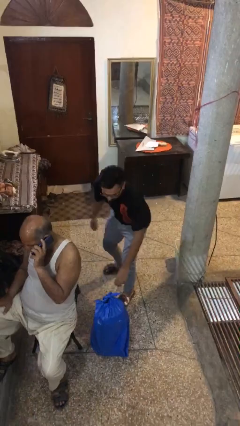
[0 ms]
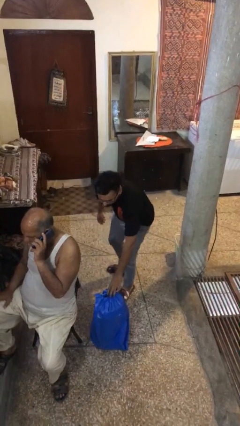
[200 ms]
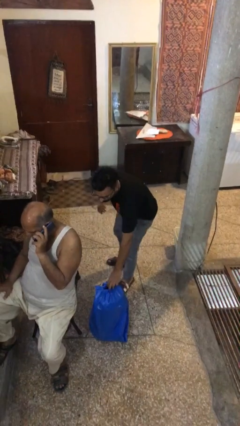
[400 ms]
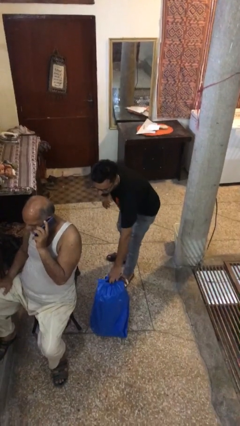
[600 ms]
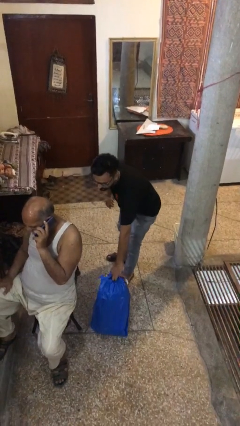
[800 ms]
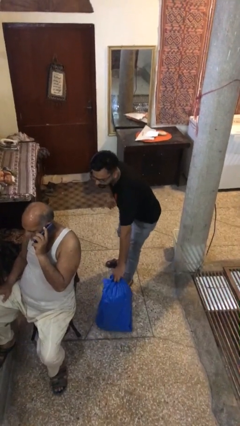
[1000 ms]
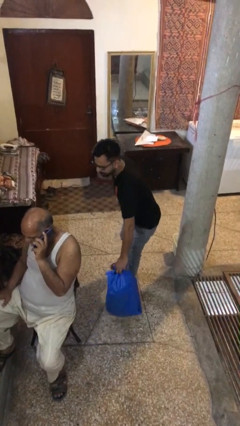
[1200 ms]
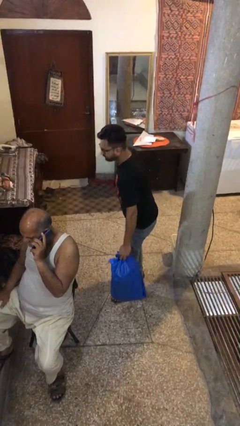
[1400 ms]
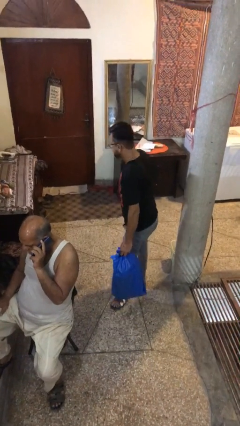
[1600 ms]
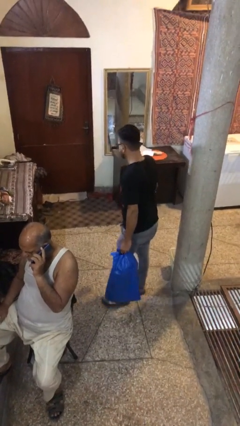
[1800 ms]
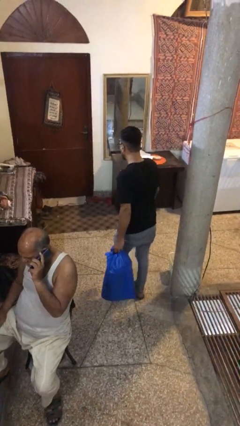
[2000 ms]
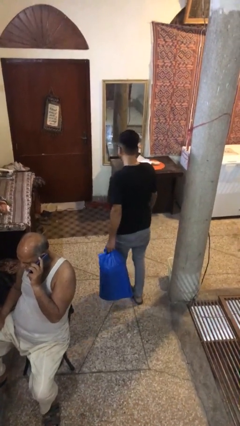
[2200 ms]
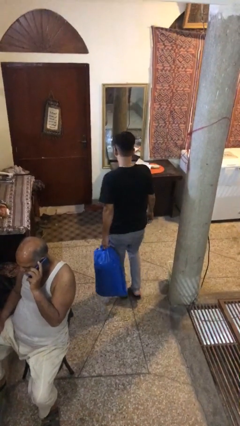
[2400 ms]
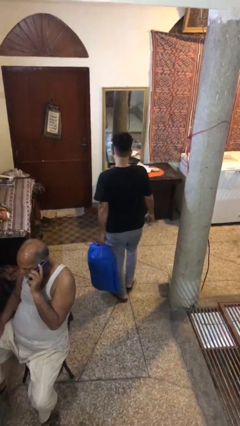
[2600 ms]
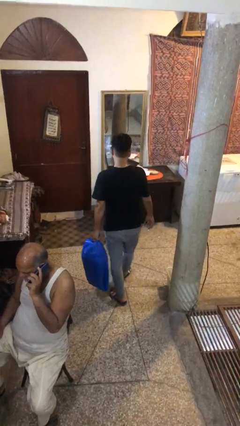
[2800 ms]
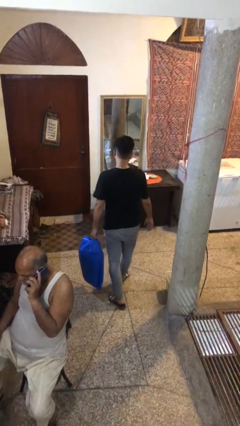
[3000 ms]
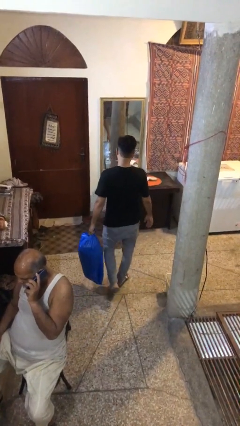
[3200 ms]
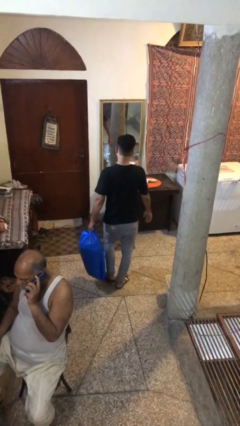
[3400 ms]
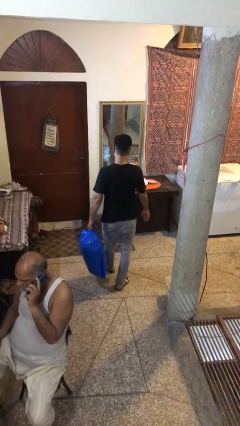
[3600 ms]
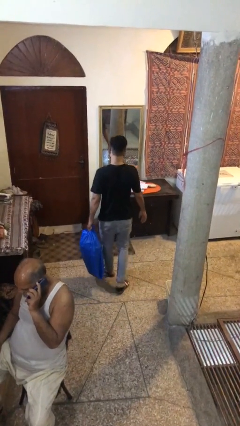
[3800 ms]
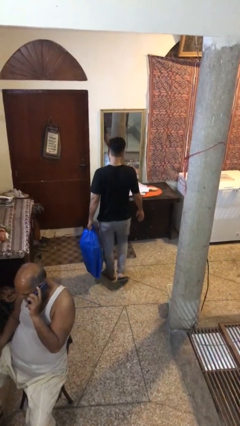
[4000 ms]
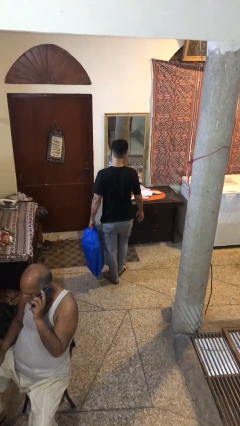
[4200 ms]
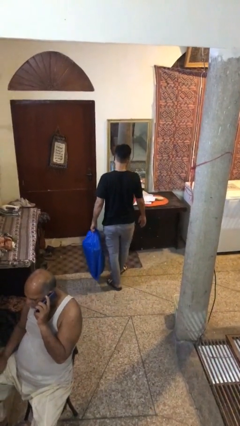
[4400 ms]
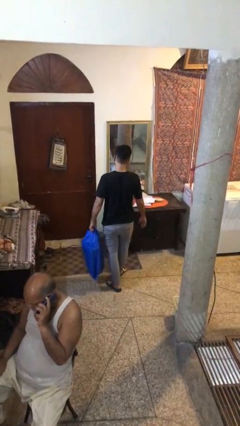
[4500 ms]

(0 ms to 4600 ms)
person steals object from person

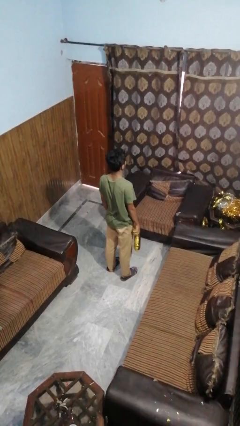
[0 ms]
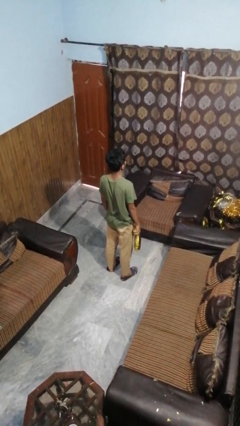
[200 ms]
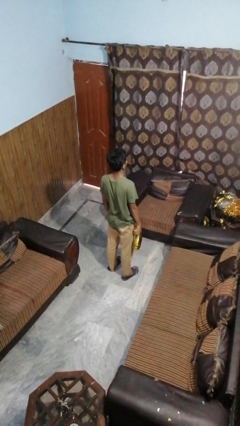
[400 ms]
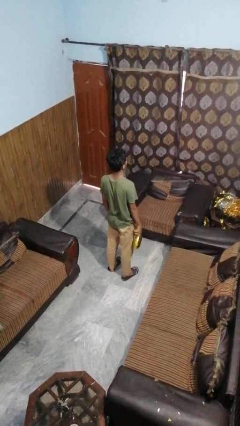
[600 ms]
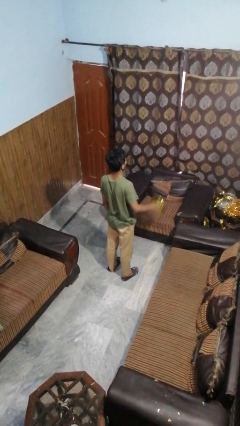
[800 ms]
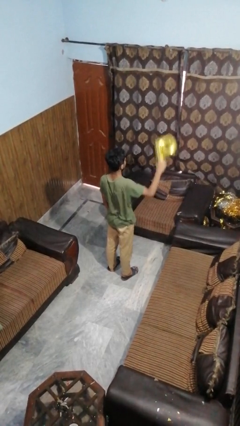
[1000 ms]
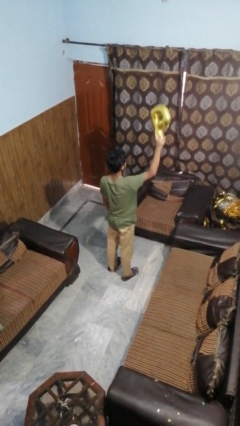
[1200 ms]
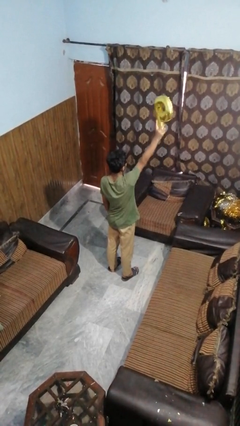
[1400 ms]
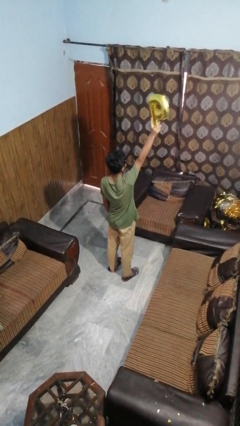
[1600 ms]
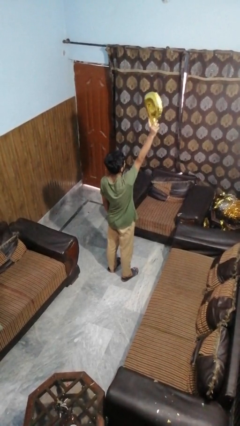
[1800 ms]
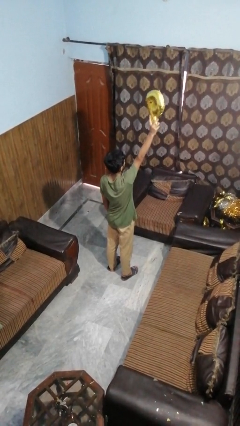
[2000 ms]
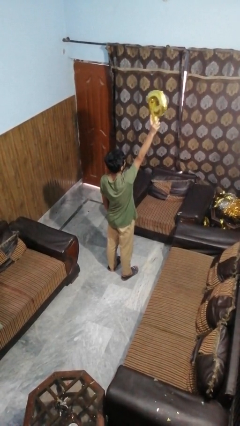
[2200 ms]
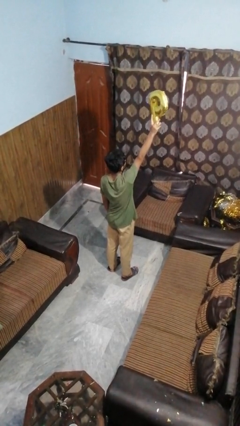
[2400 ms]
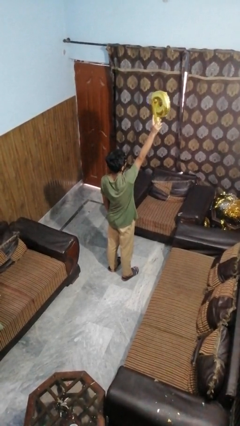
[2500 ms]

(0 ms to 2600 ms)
person holds object above head

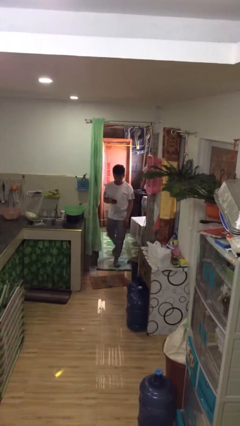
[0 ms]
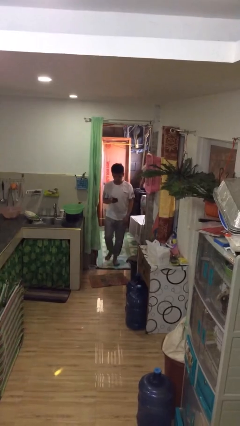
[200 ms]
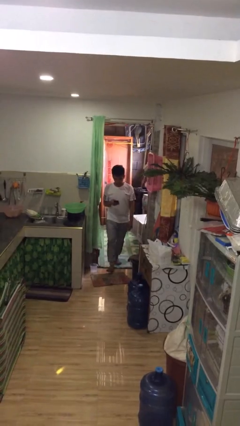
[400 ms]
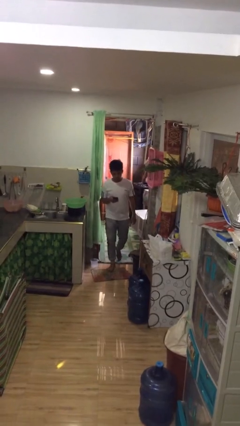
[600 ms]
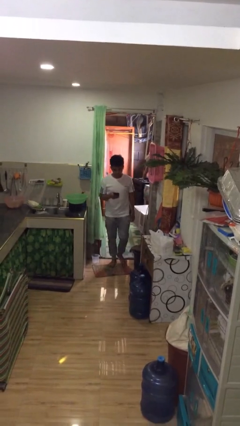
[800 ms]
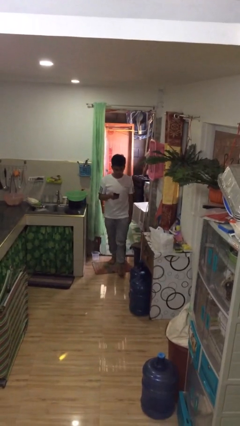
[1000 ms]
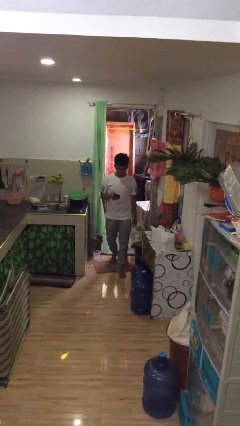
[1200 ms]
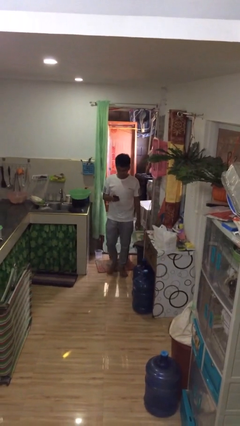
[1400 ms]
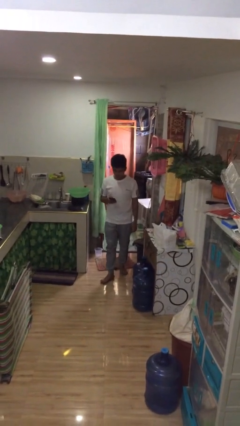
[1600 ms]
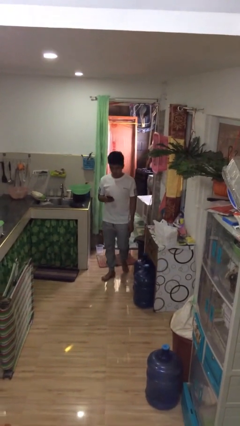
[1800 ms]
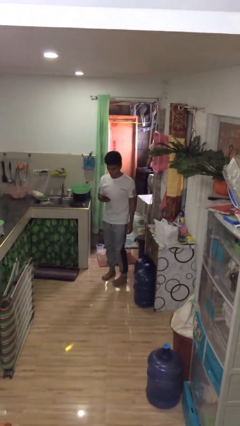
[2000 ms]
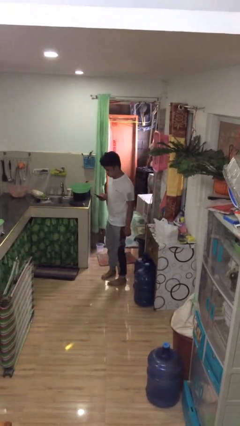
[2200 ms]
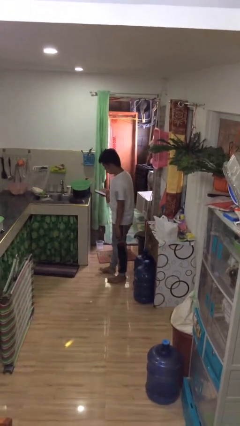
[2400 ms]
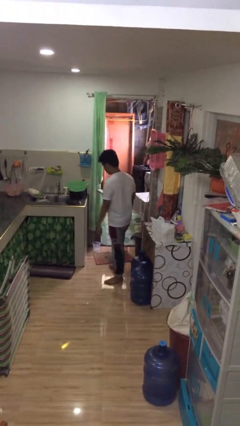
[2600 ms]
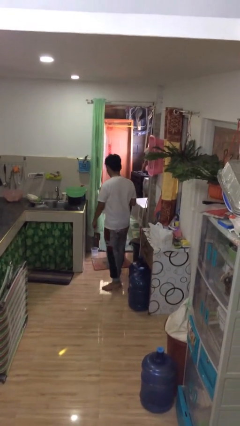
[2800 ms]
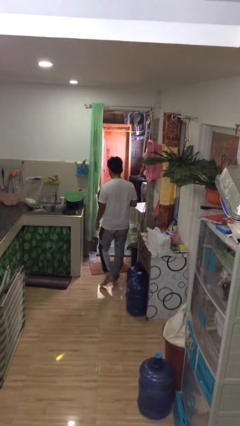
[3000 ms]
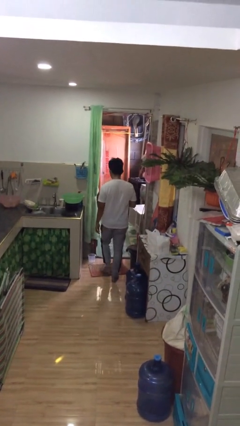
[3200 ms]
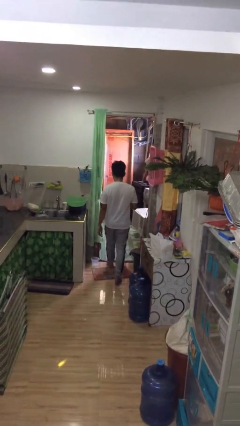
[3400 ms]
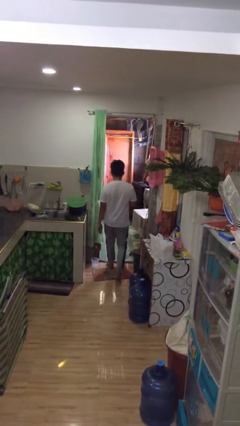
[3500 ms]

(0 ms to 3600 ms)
person enters scene through structure

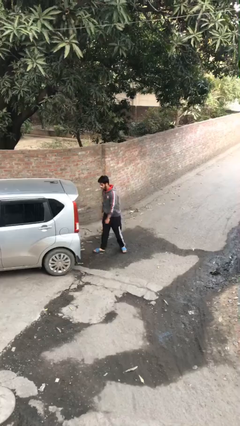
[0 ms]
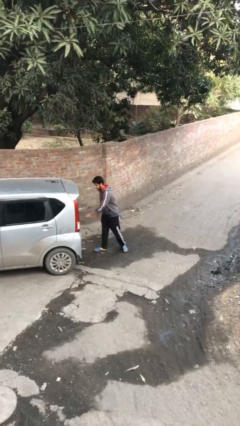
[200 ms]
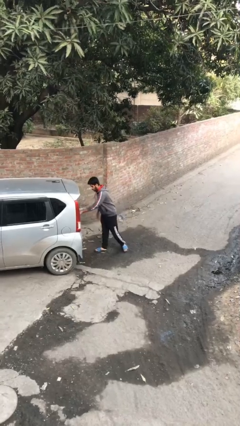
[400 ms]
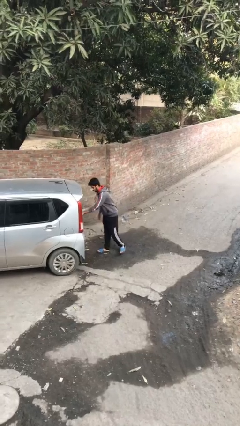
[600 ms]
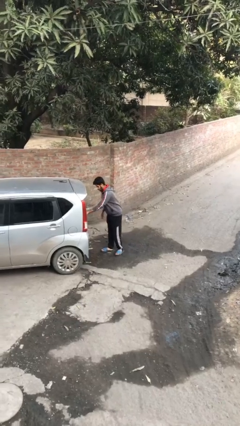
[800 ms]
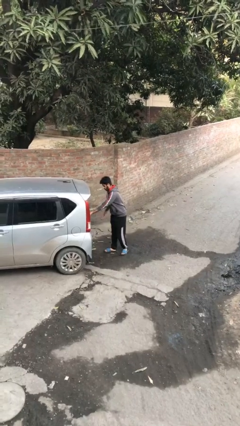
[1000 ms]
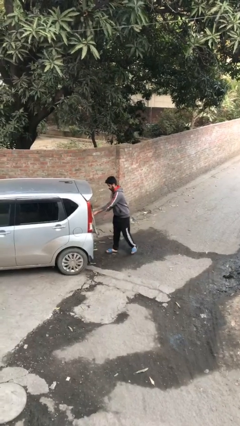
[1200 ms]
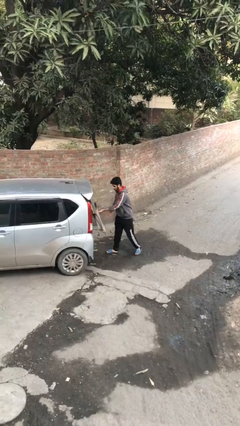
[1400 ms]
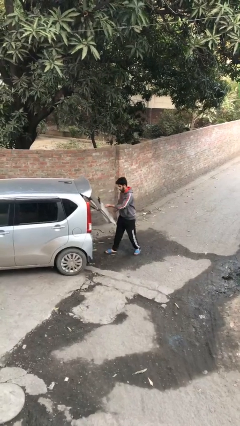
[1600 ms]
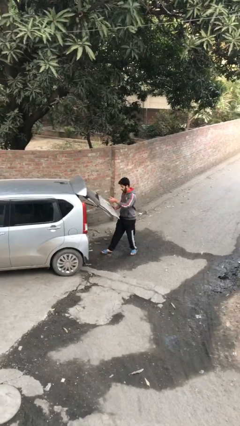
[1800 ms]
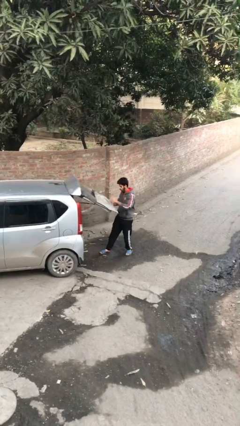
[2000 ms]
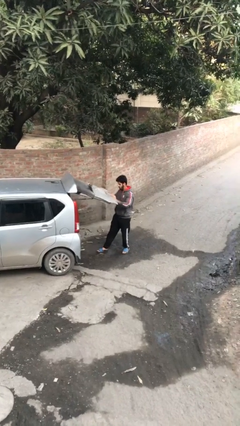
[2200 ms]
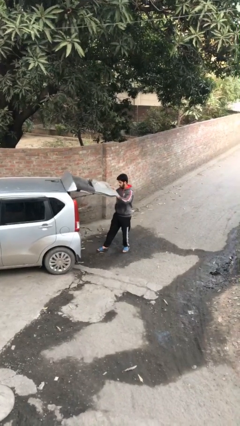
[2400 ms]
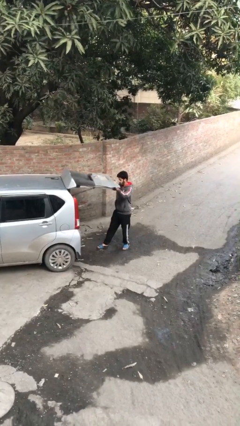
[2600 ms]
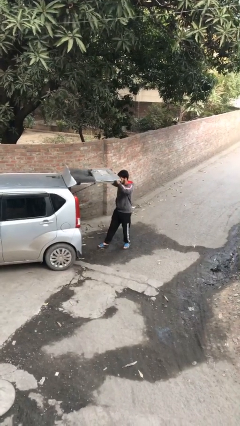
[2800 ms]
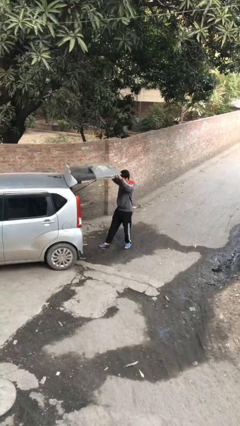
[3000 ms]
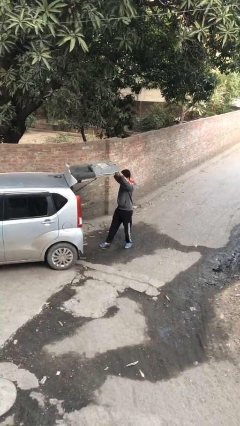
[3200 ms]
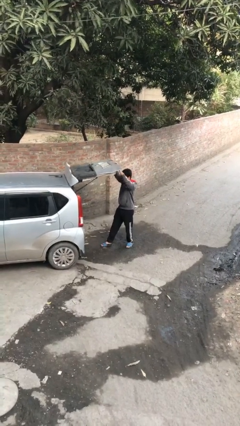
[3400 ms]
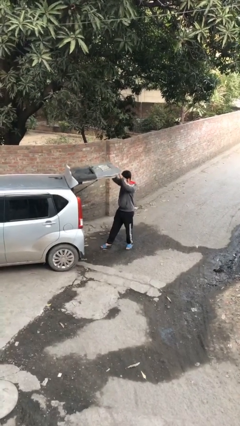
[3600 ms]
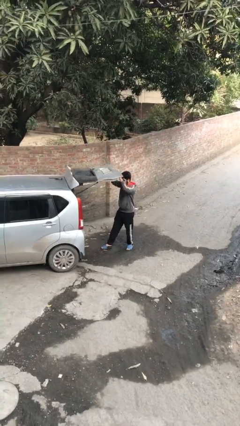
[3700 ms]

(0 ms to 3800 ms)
person opens car trunk

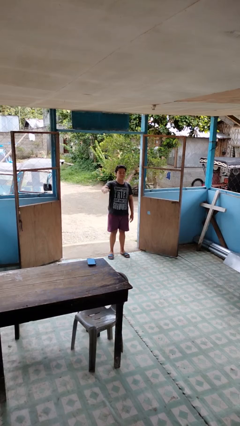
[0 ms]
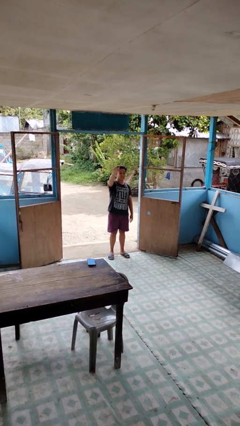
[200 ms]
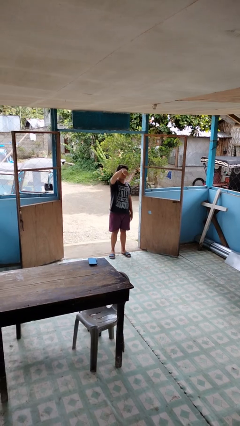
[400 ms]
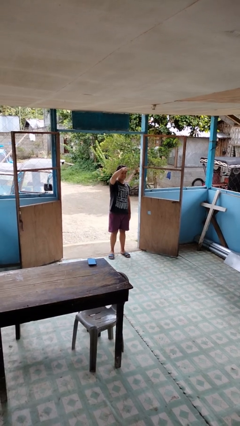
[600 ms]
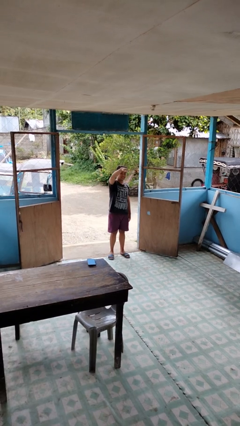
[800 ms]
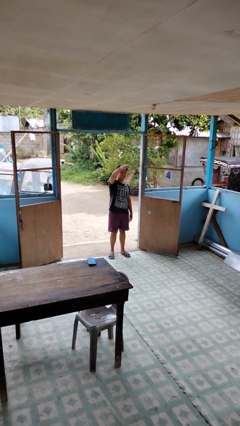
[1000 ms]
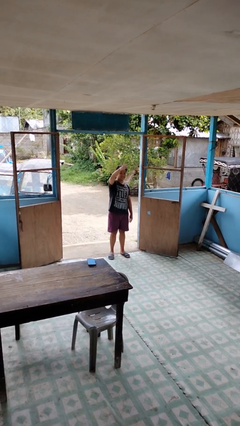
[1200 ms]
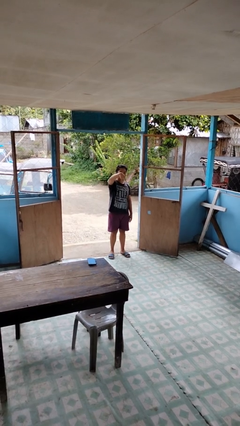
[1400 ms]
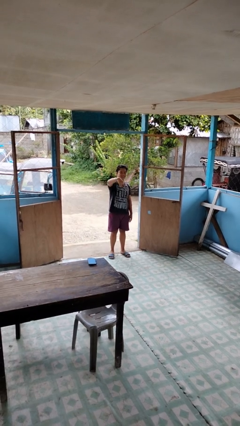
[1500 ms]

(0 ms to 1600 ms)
person gestures come here

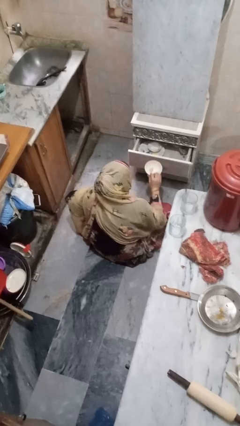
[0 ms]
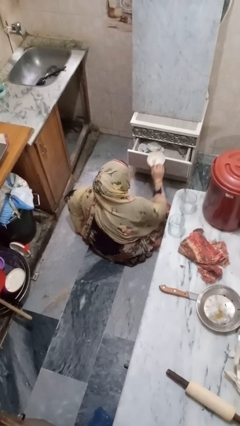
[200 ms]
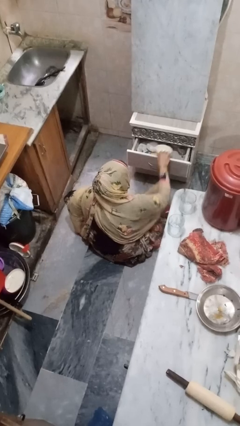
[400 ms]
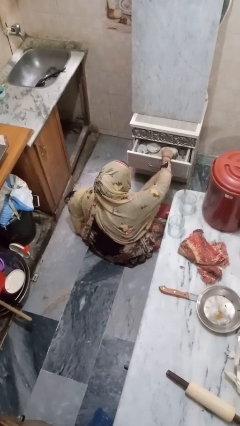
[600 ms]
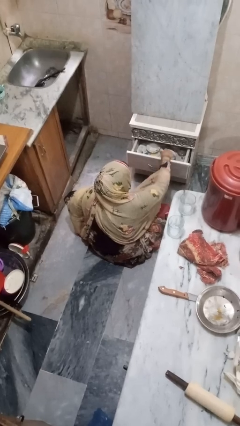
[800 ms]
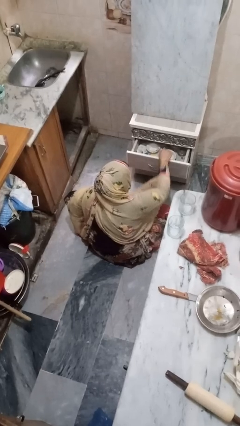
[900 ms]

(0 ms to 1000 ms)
person puts object into kitchen drawer

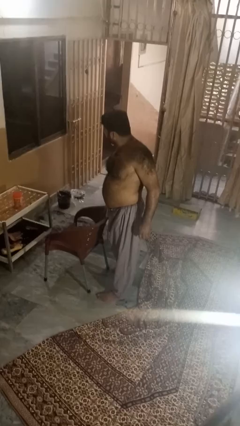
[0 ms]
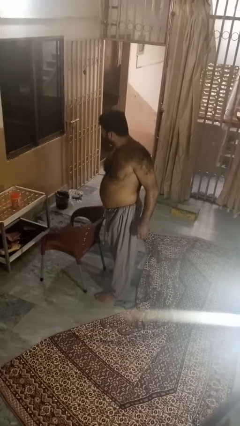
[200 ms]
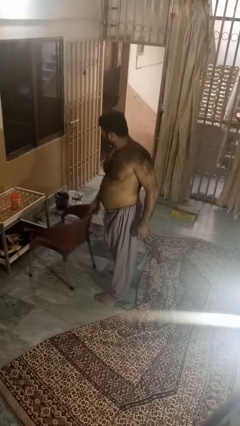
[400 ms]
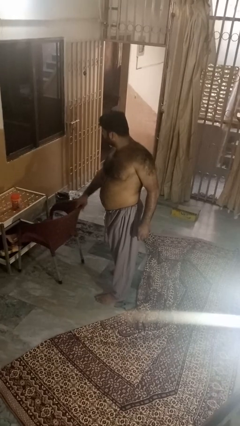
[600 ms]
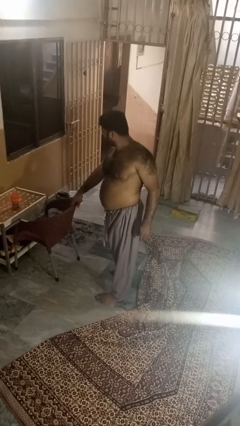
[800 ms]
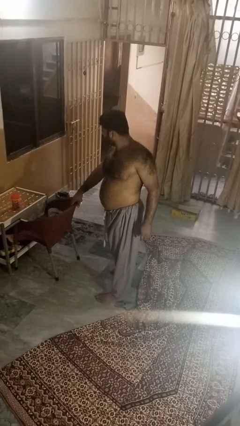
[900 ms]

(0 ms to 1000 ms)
person pushes in chair
